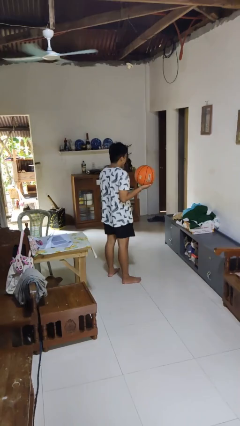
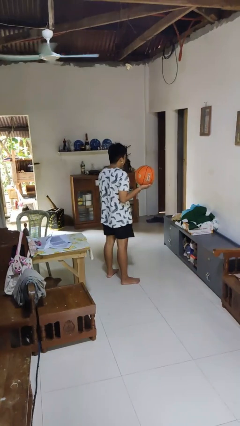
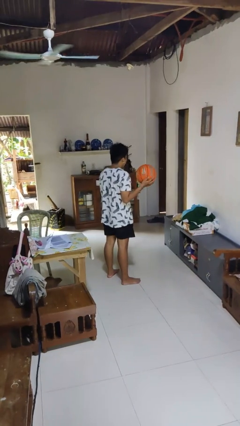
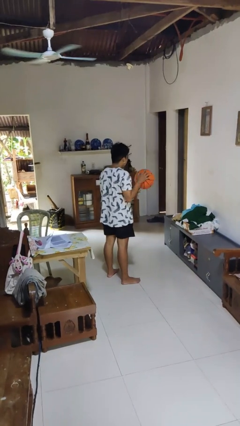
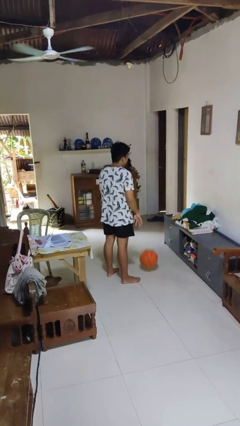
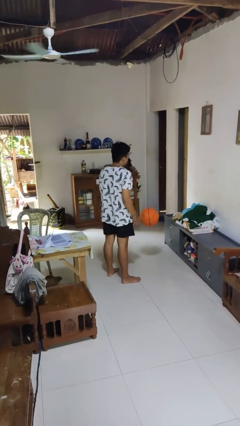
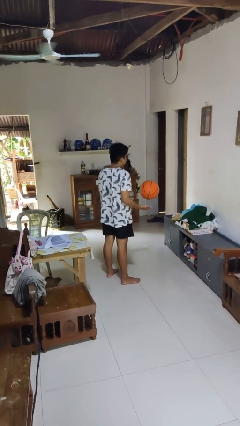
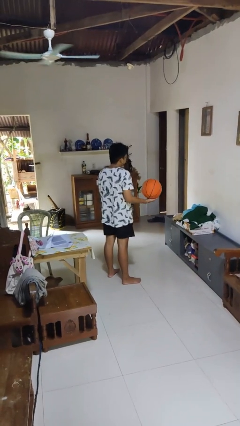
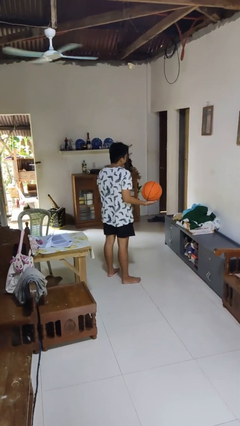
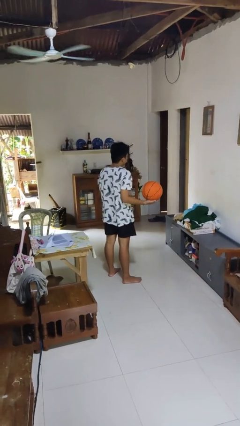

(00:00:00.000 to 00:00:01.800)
person bounces ball on floor

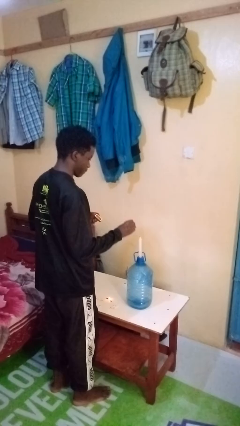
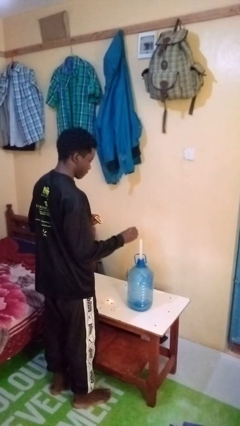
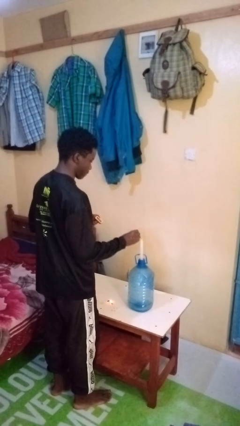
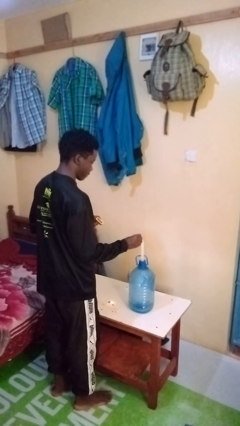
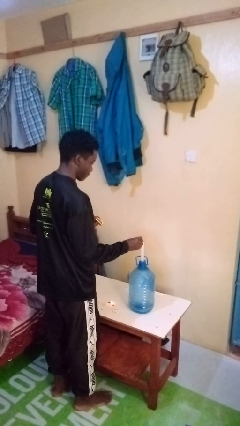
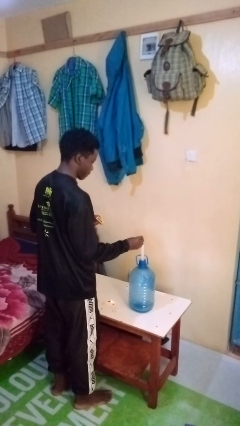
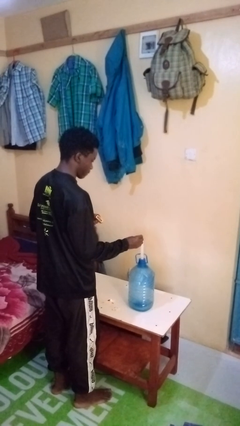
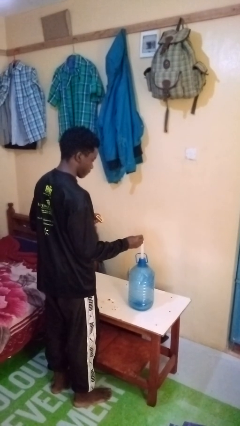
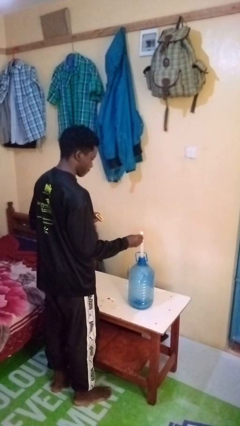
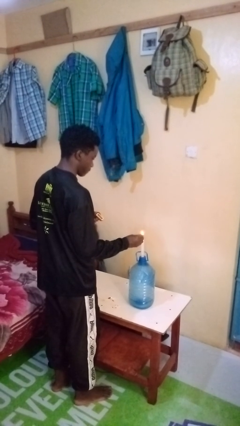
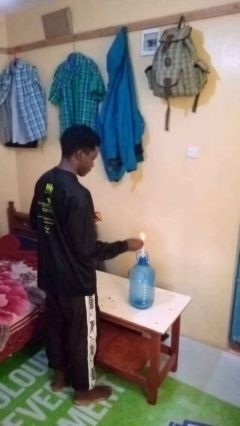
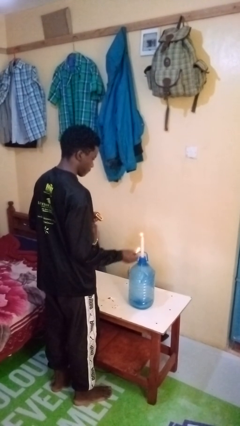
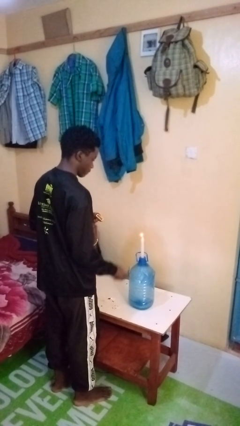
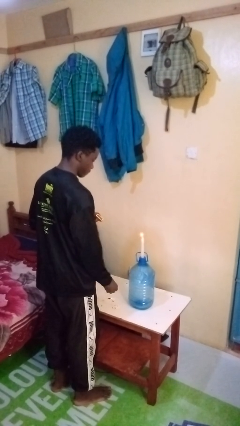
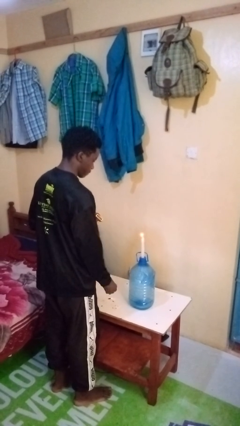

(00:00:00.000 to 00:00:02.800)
person lights candle

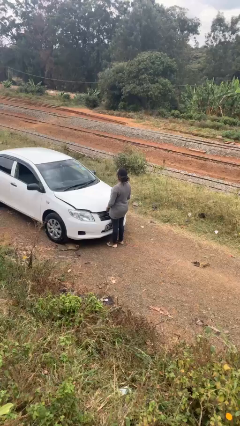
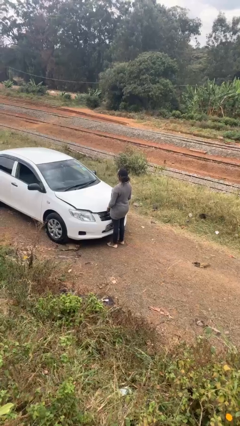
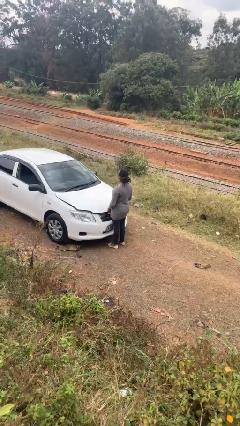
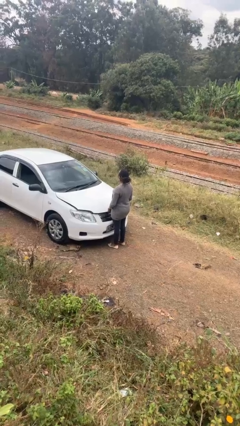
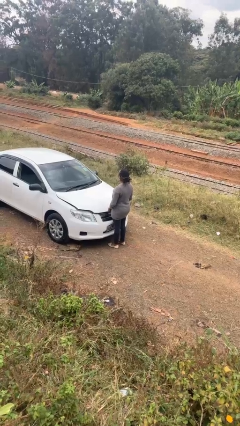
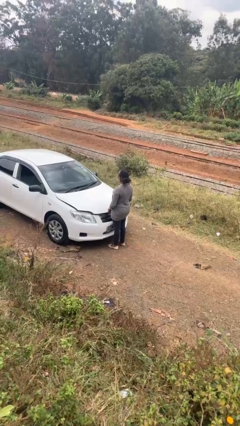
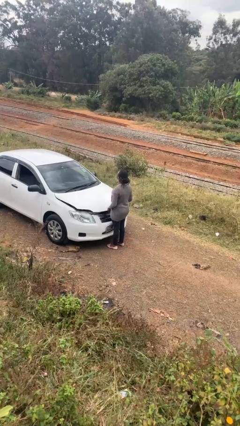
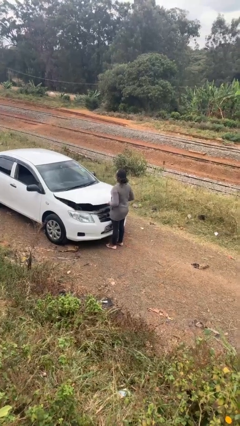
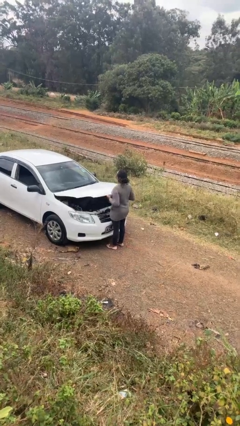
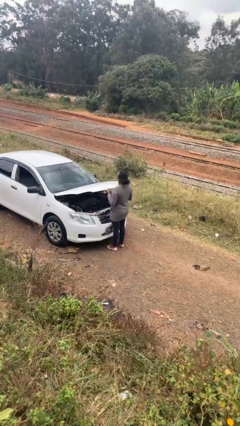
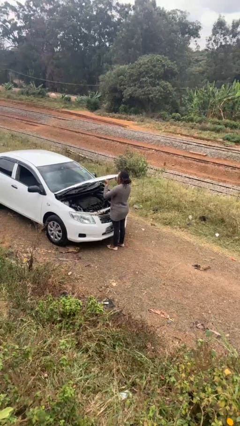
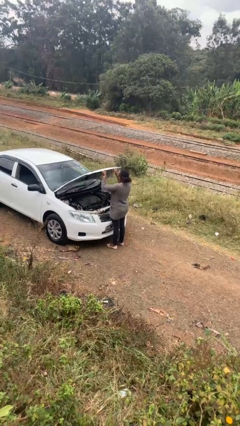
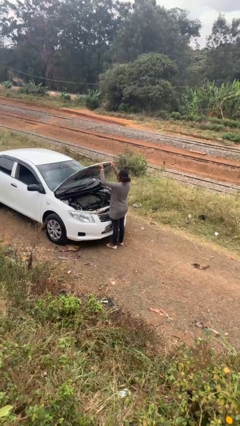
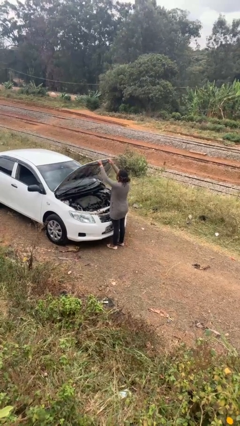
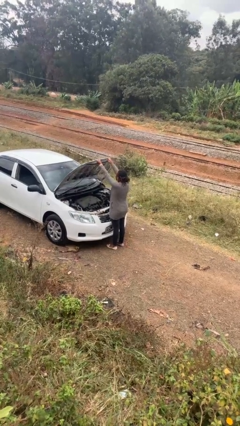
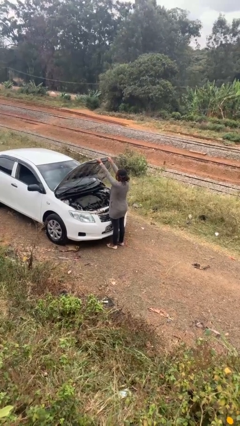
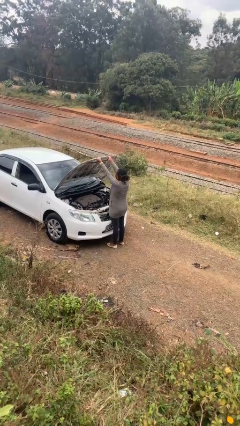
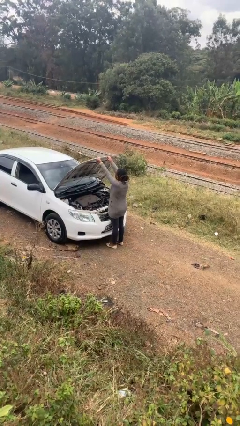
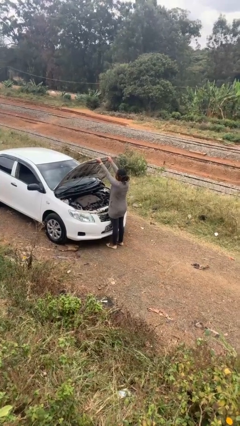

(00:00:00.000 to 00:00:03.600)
person opens car hood

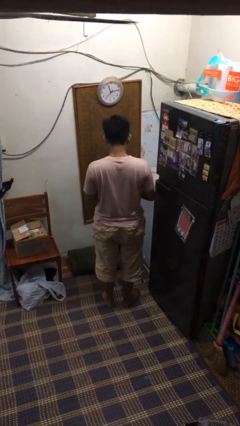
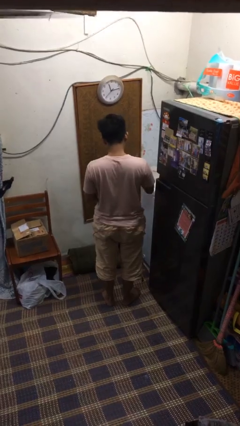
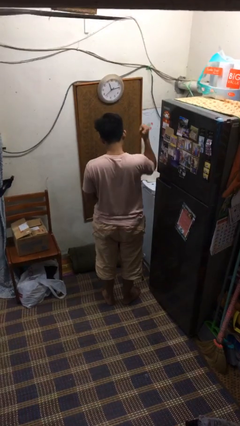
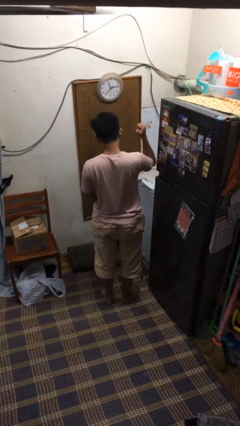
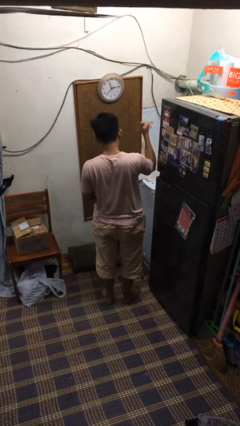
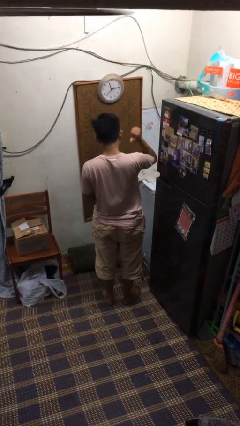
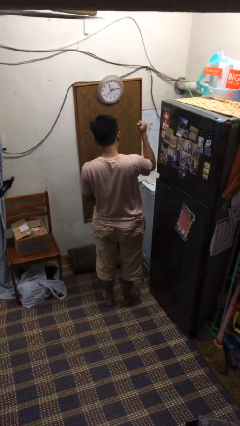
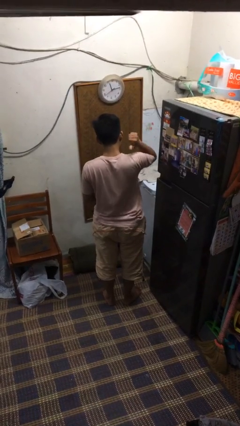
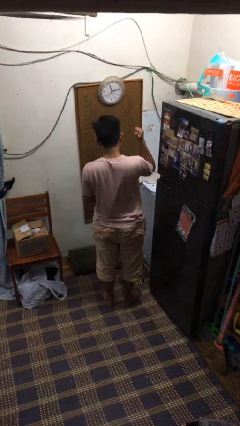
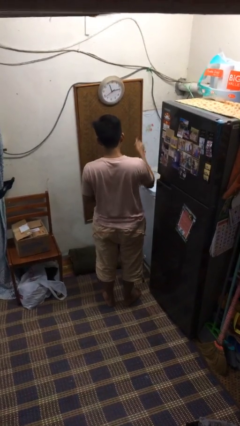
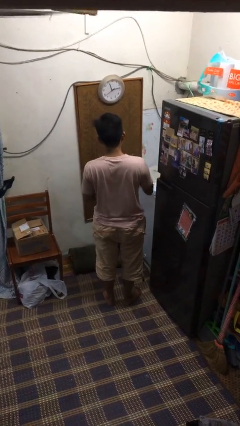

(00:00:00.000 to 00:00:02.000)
person gestures behind me

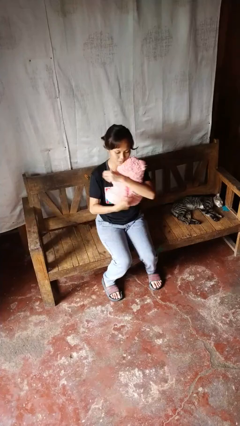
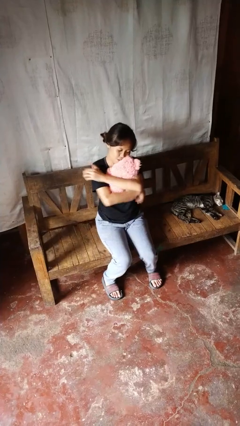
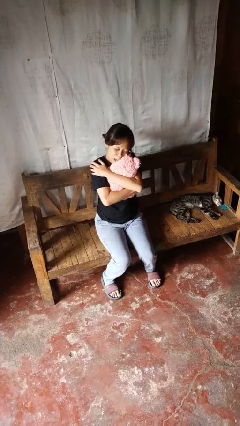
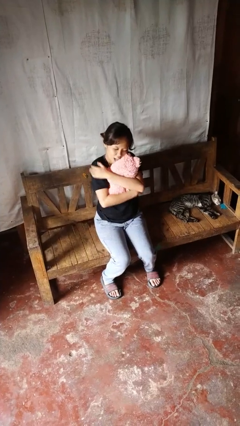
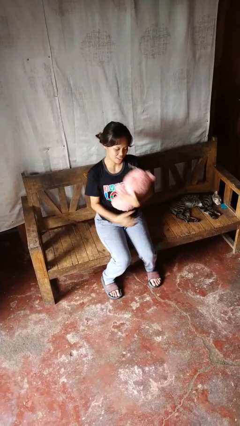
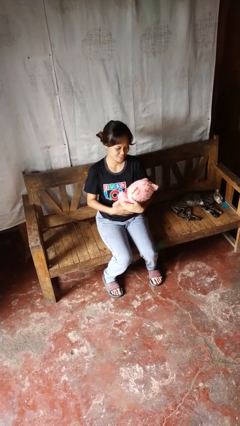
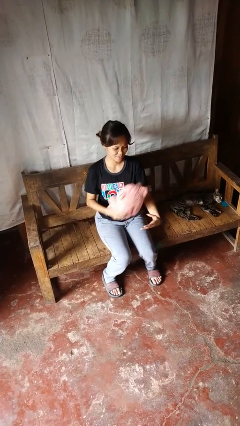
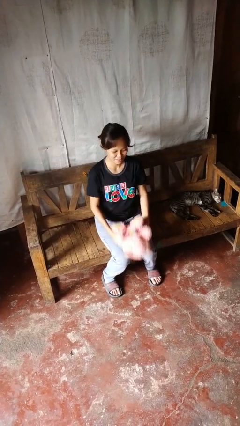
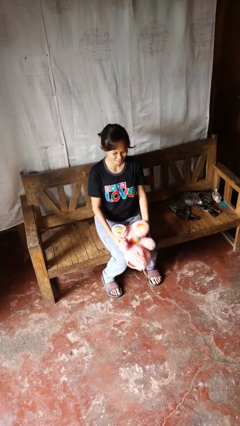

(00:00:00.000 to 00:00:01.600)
person hugs stuffed animal

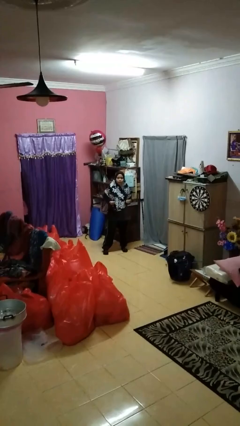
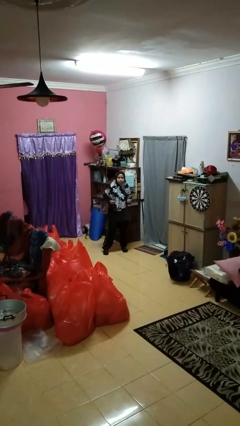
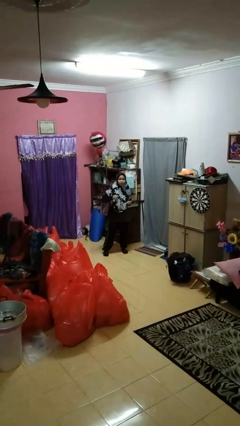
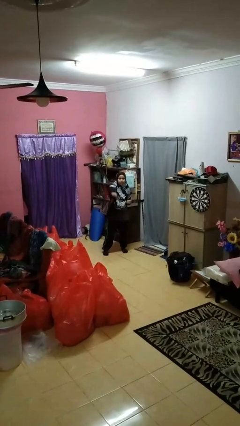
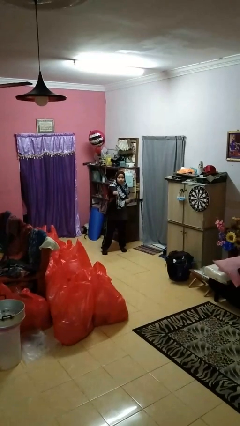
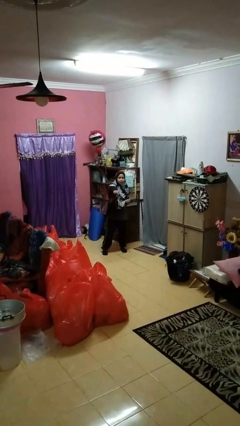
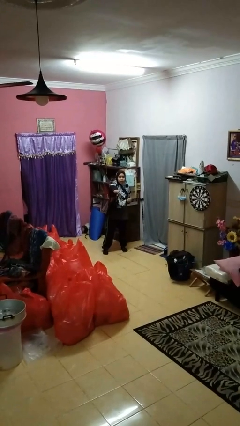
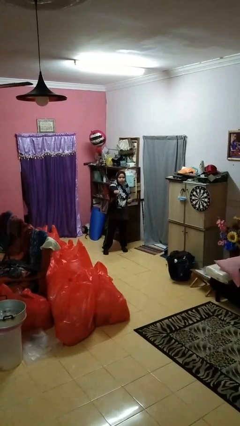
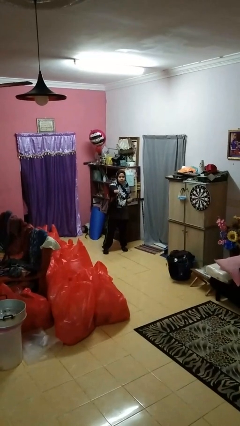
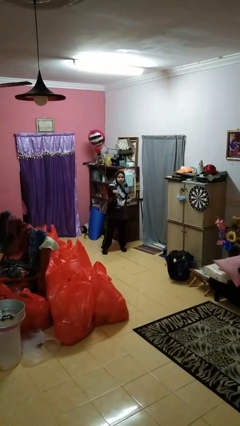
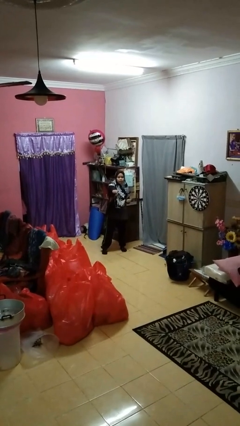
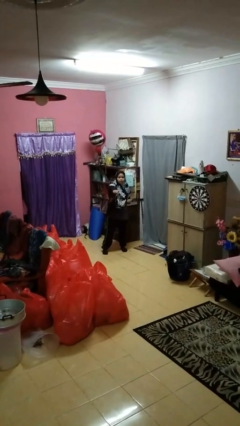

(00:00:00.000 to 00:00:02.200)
person punches

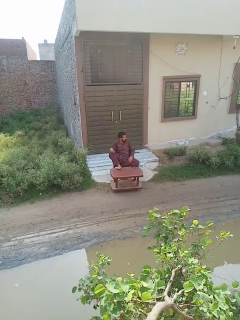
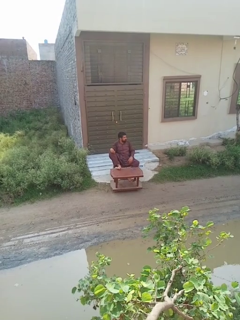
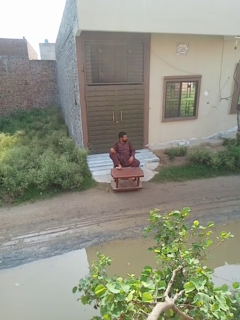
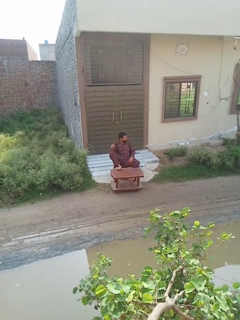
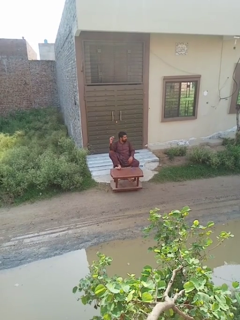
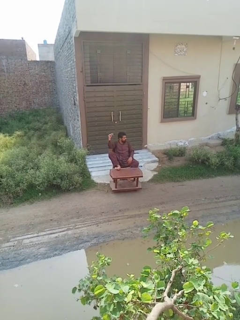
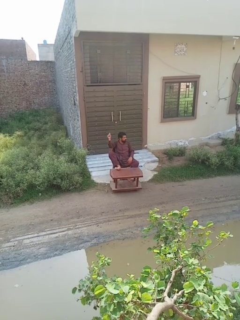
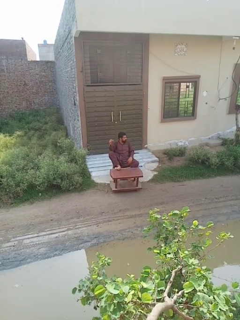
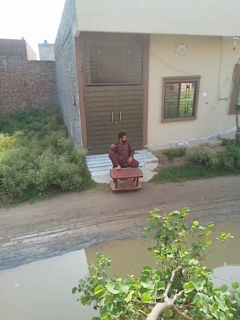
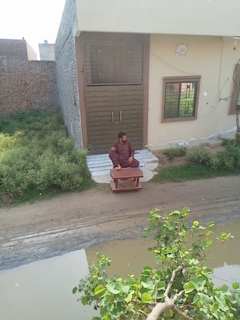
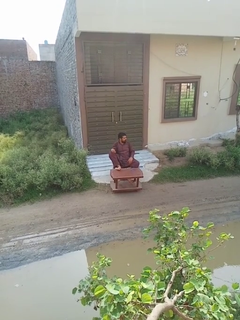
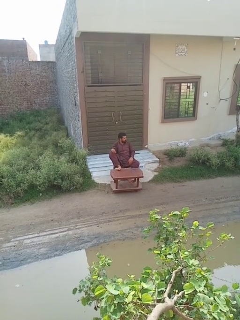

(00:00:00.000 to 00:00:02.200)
person snaps fingers

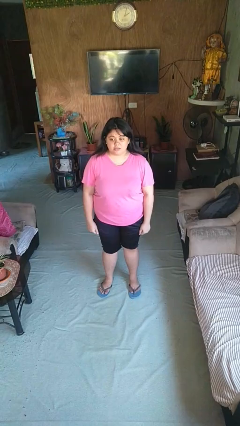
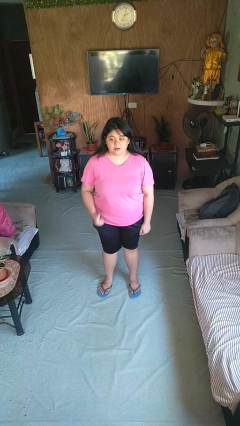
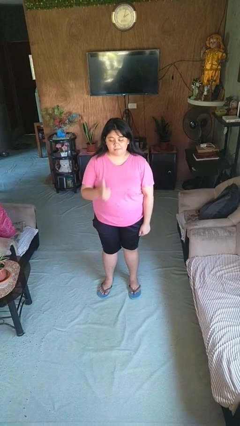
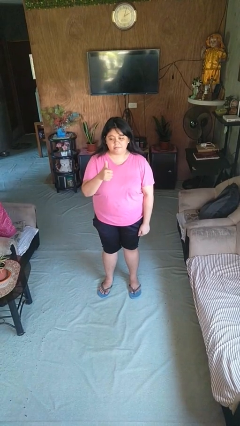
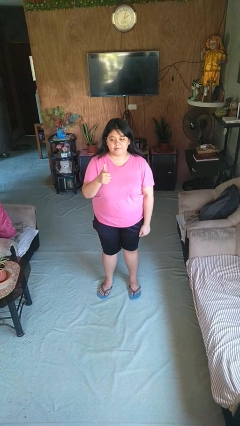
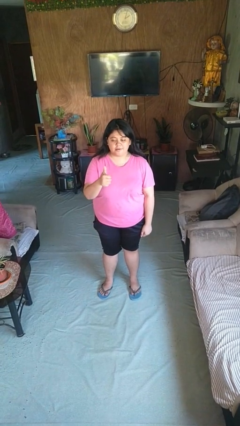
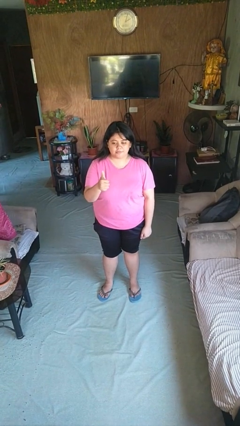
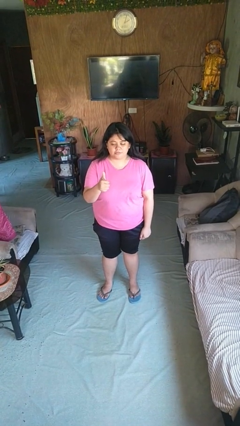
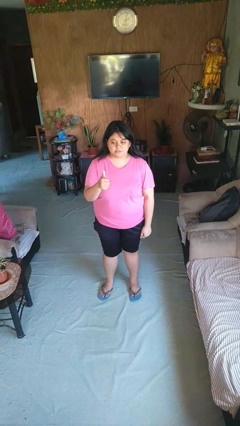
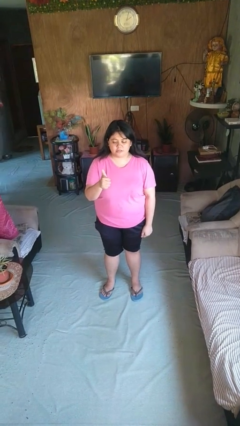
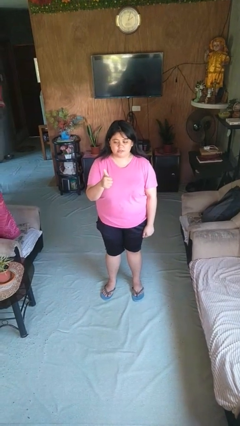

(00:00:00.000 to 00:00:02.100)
person gestures thumbs up
